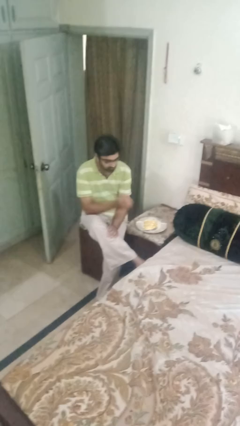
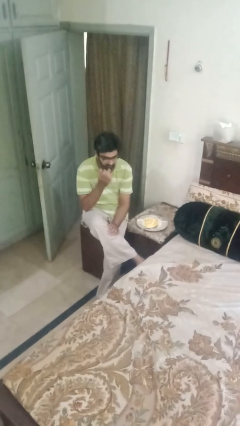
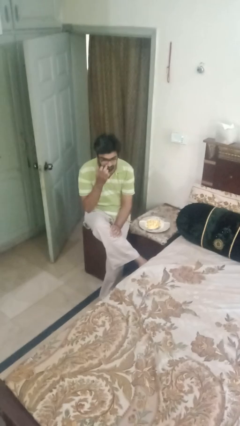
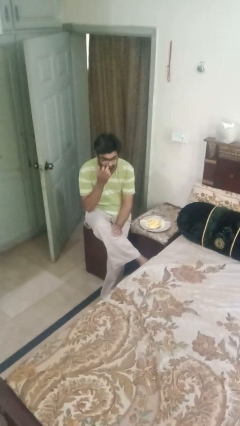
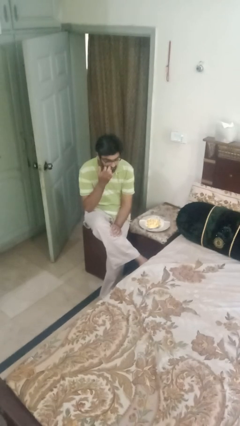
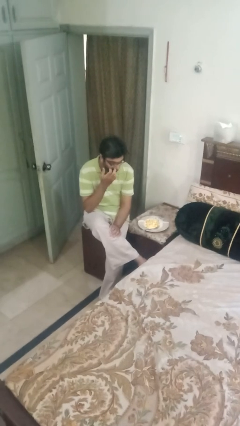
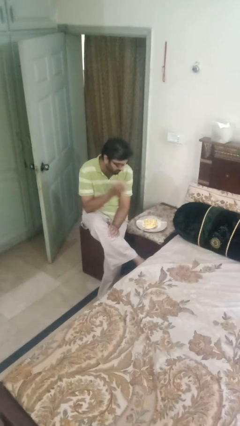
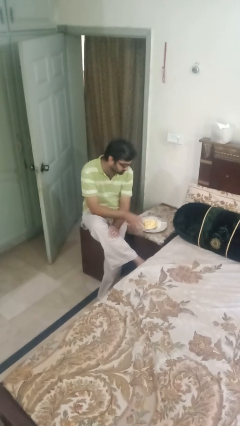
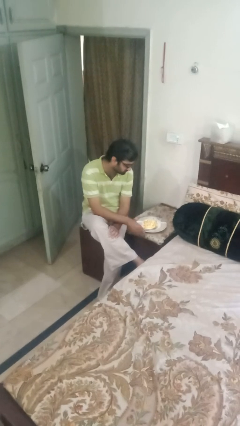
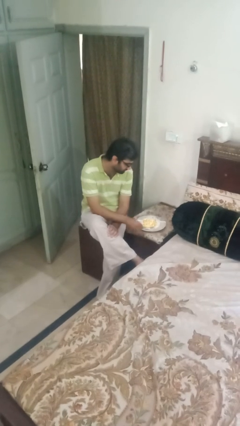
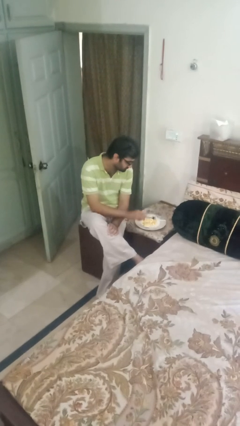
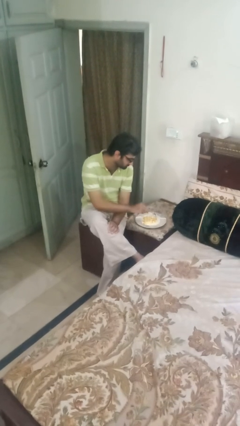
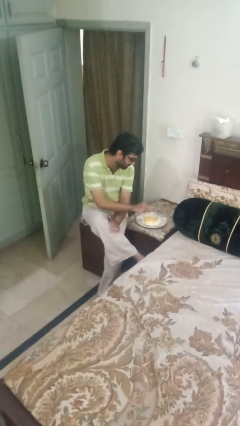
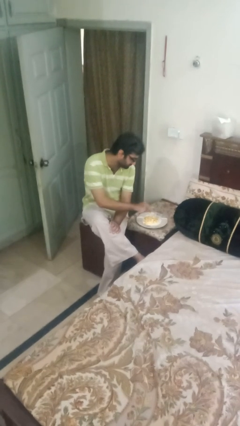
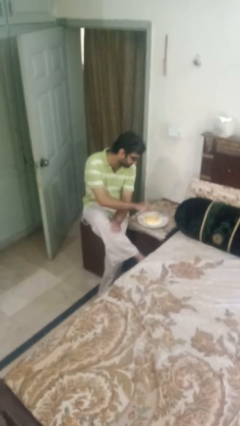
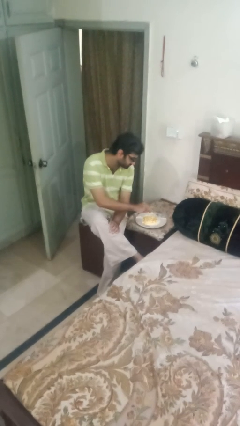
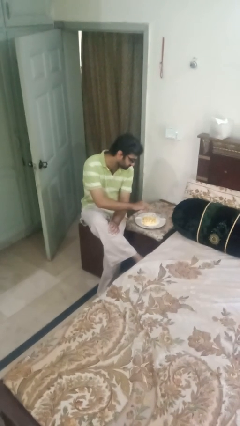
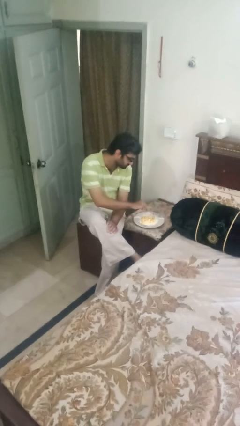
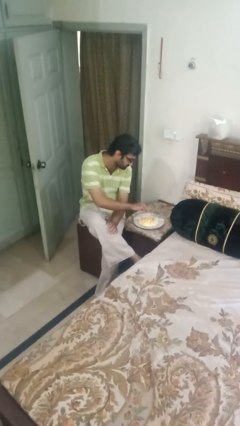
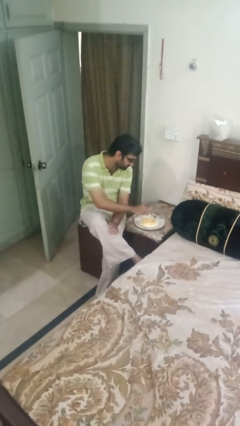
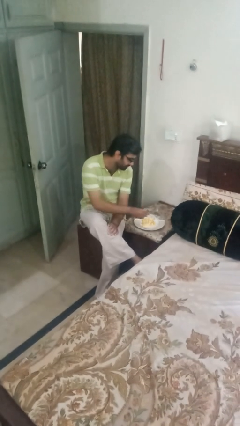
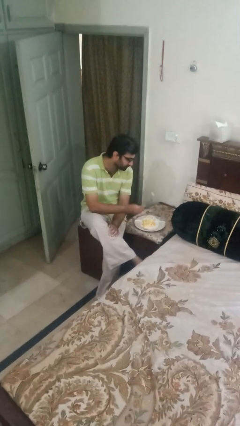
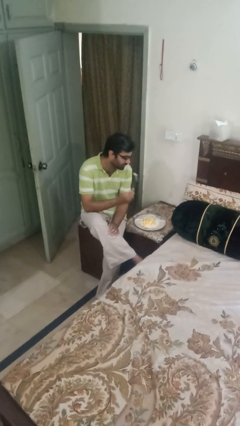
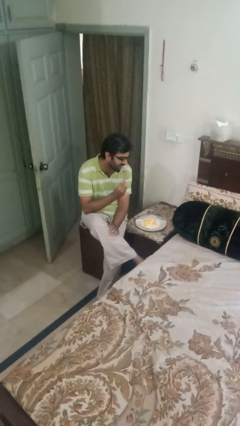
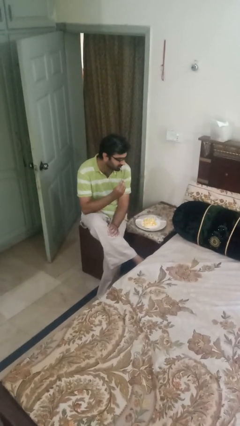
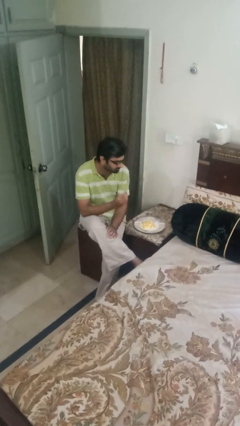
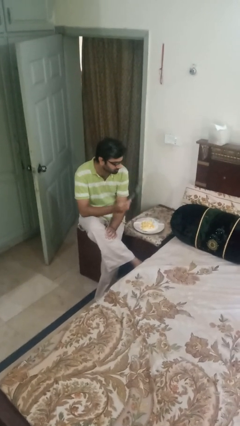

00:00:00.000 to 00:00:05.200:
person eats with utensil

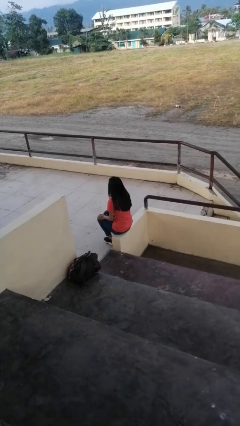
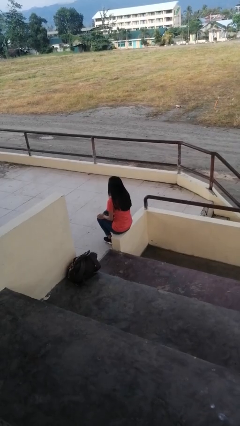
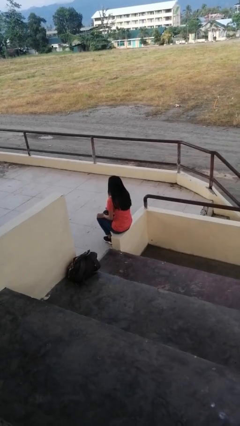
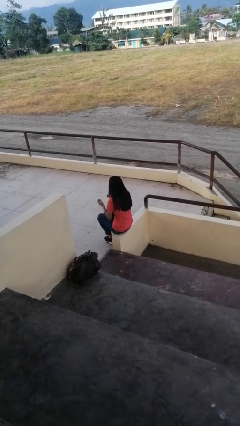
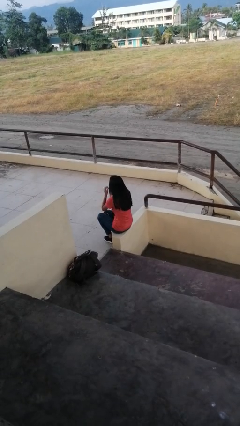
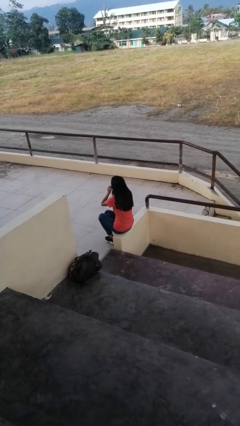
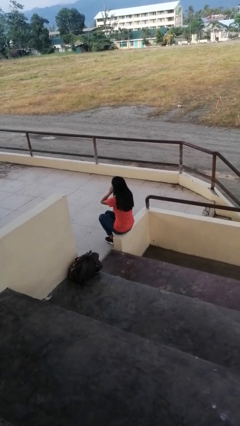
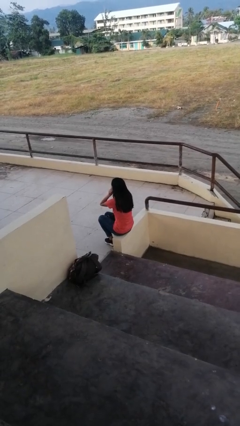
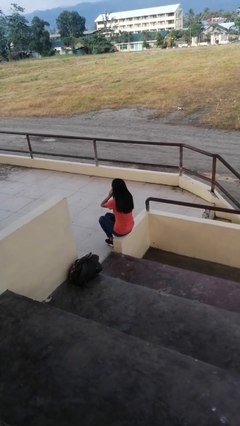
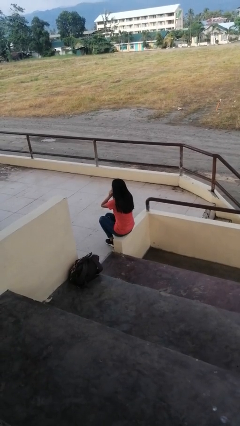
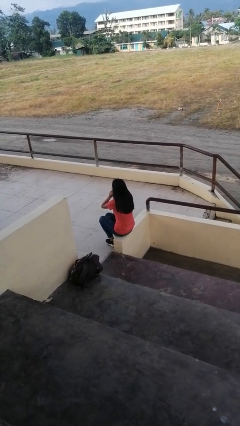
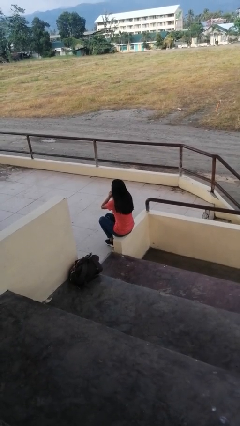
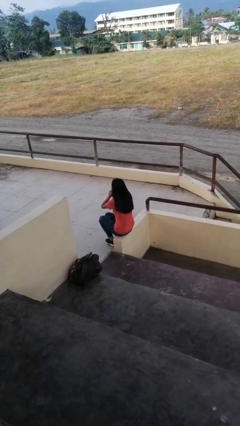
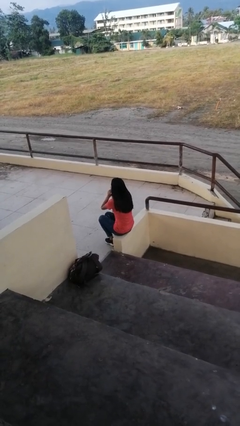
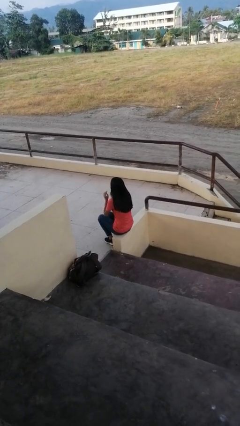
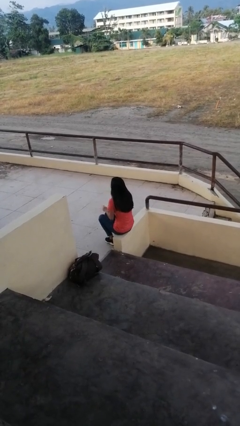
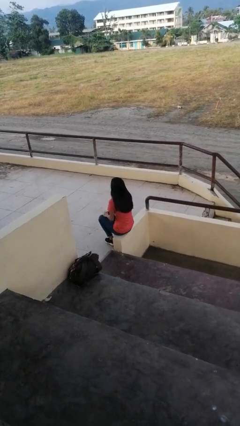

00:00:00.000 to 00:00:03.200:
person puts on headphones

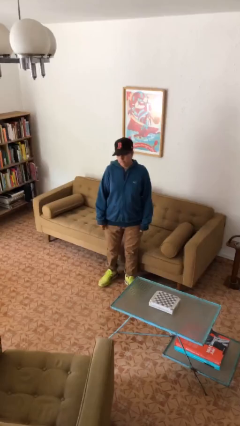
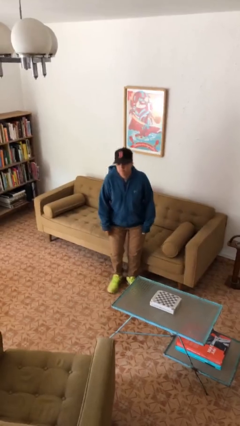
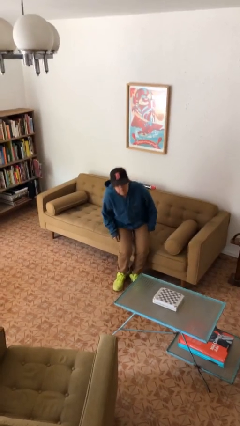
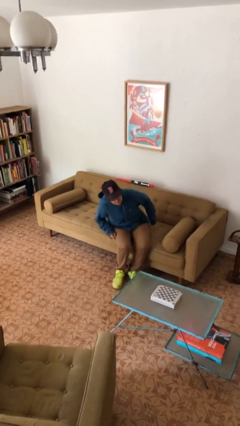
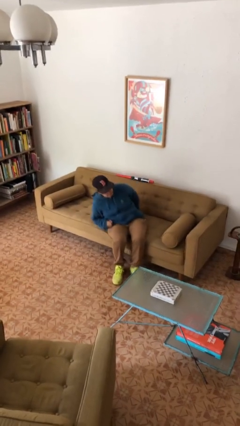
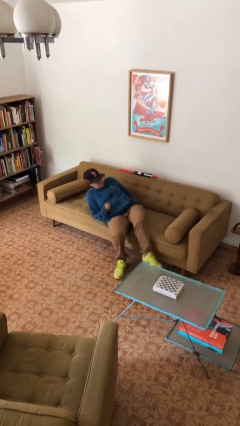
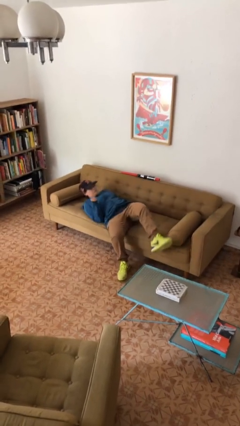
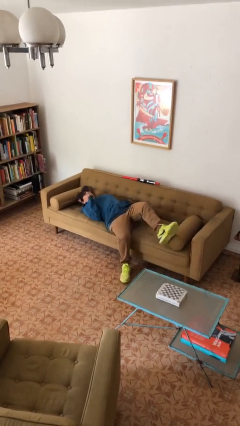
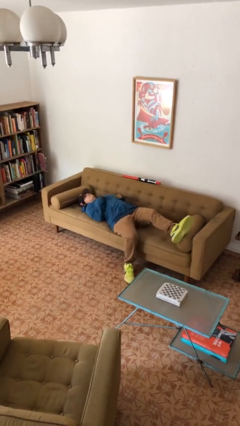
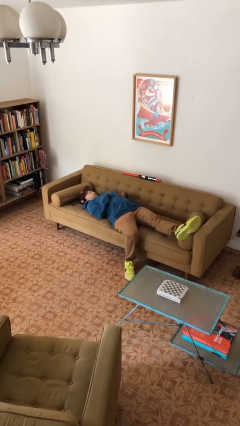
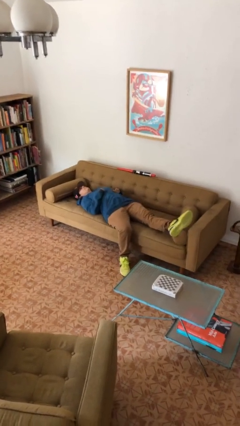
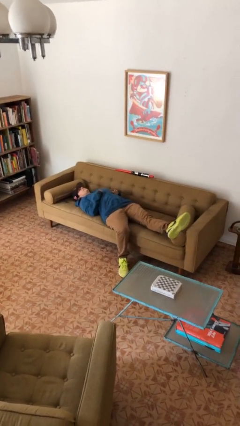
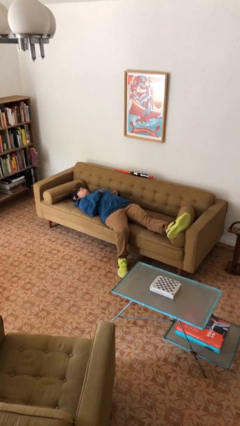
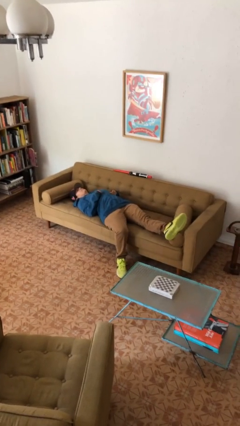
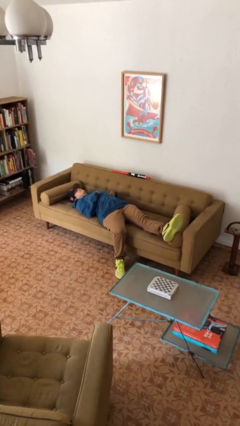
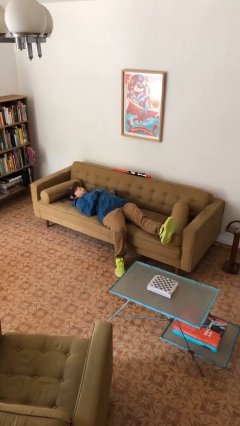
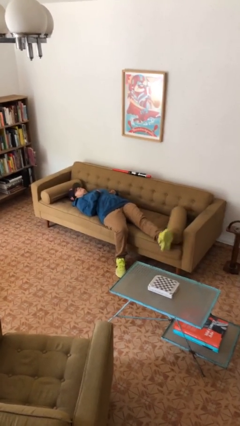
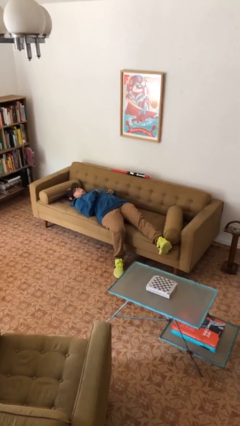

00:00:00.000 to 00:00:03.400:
person lies down on couch

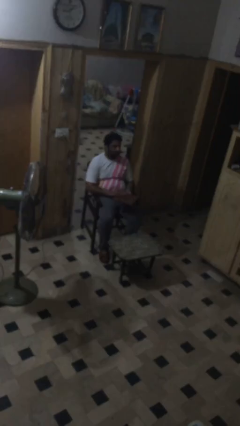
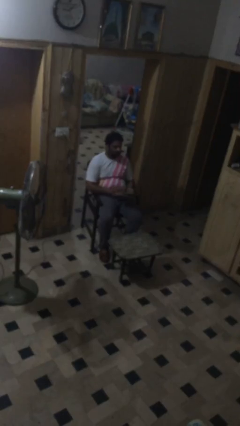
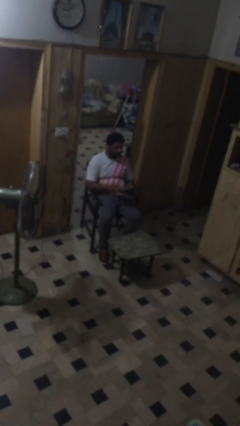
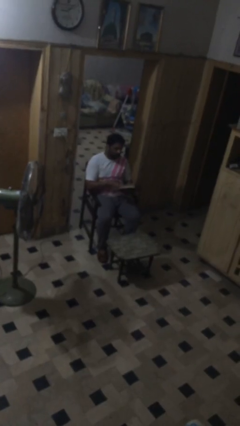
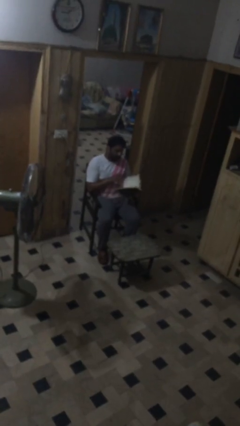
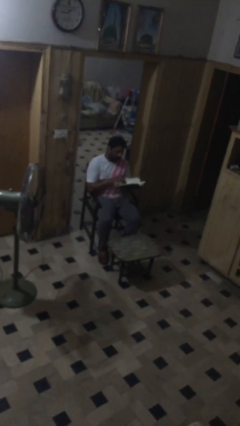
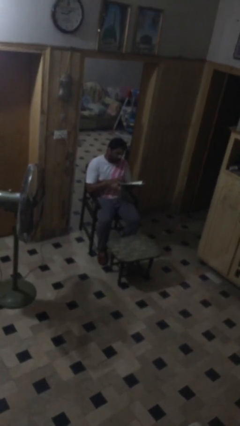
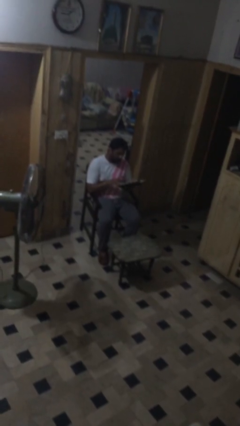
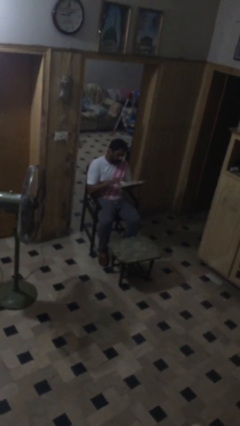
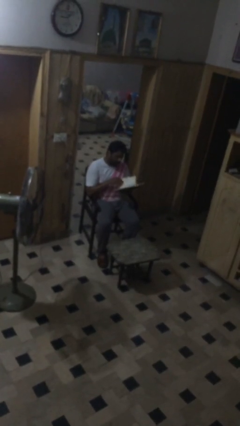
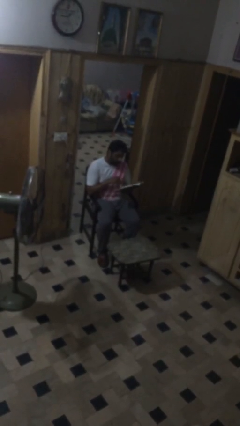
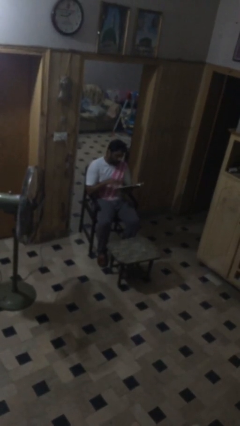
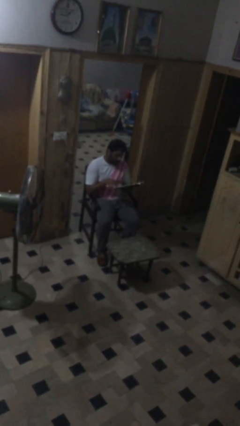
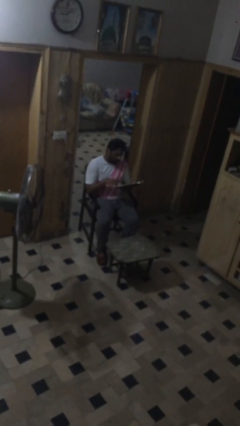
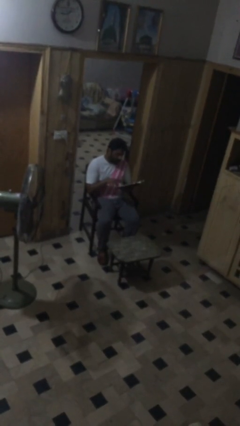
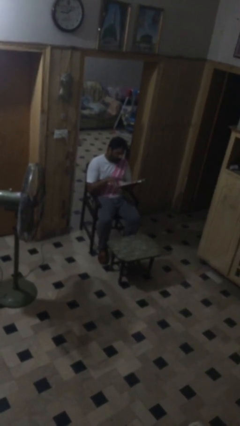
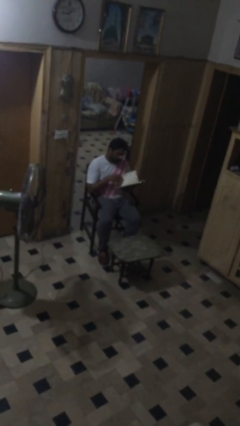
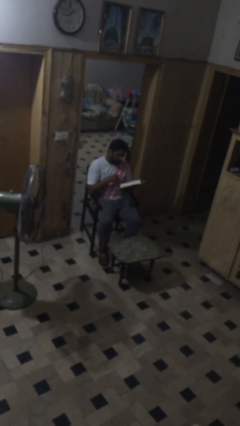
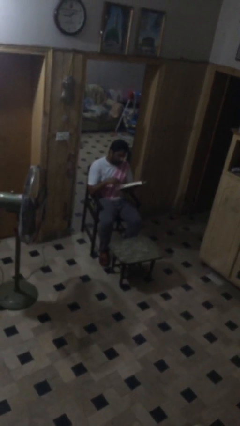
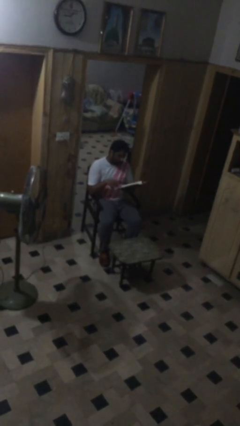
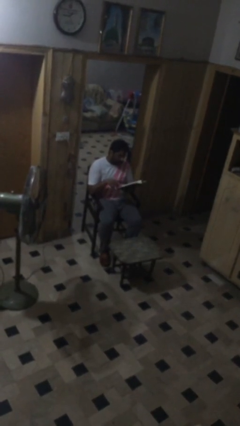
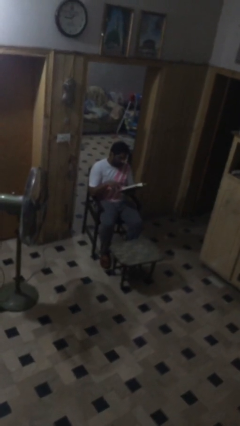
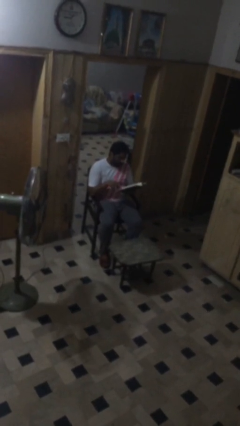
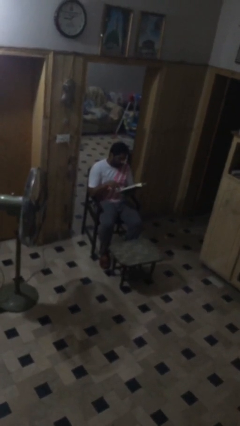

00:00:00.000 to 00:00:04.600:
person reads document

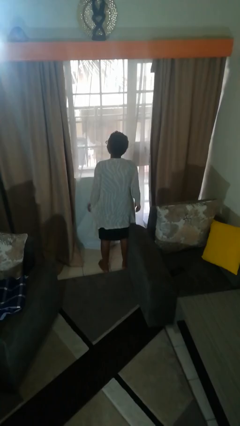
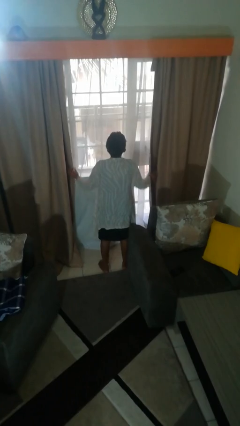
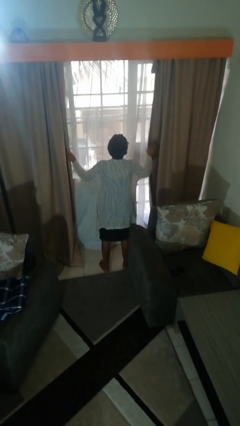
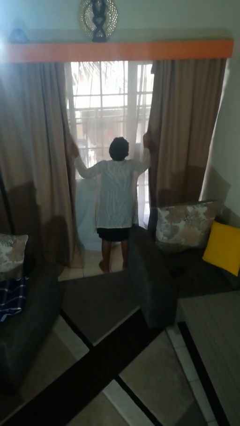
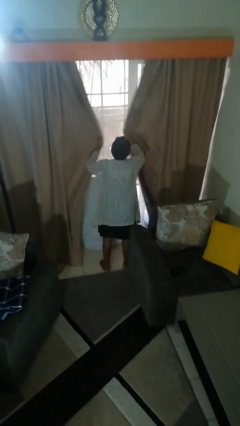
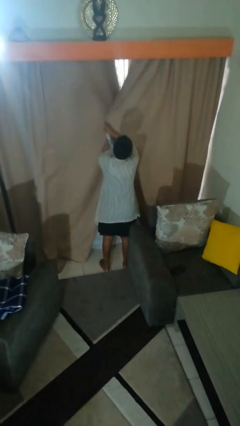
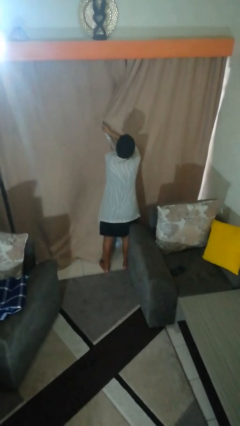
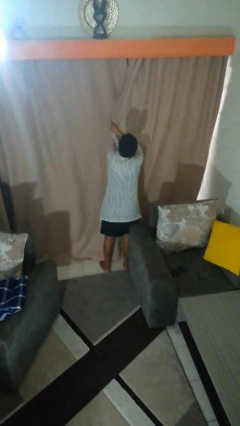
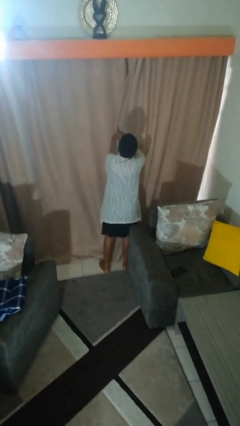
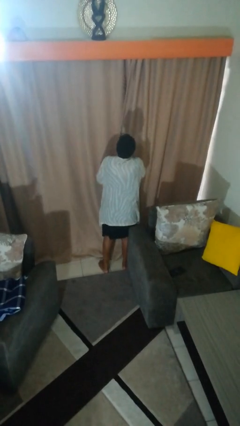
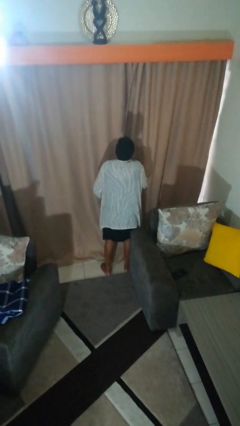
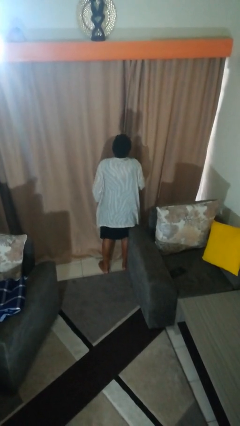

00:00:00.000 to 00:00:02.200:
person closes curtains
